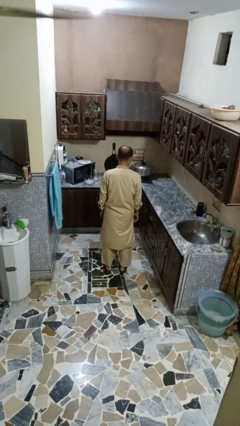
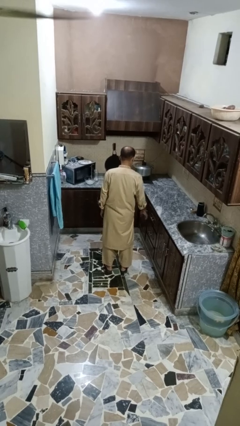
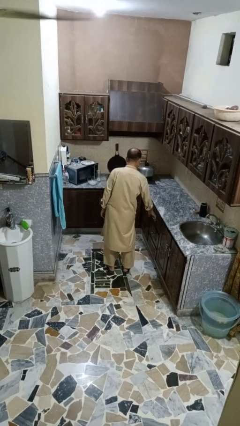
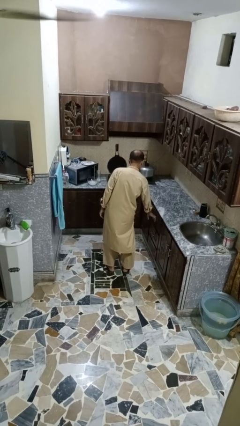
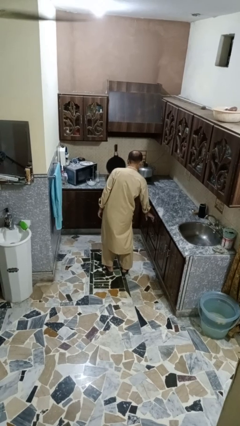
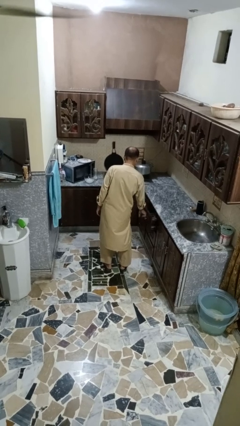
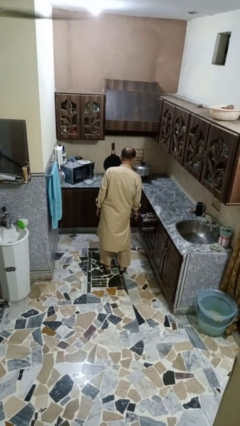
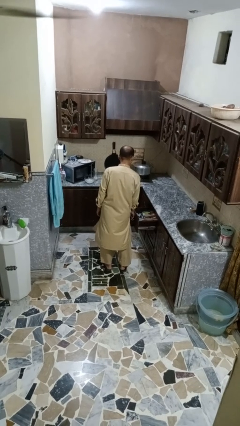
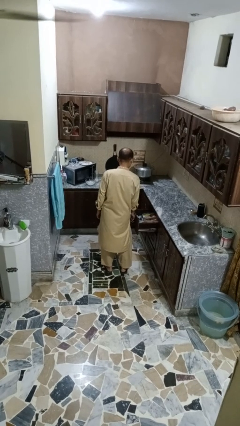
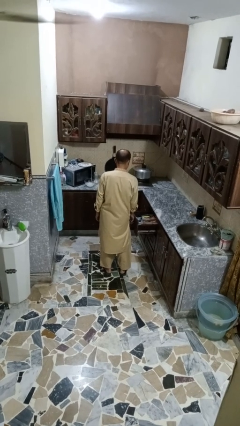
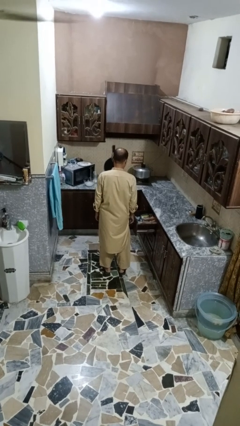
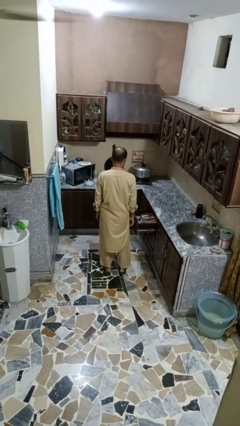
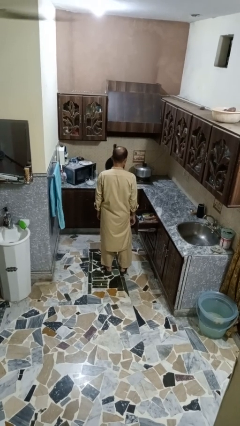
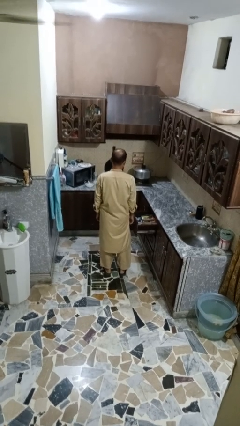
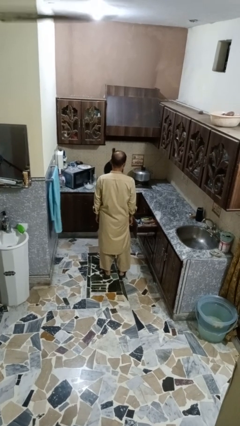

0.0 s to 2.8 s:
person opens kitchen drawer

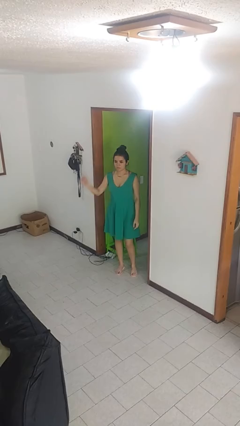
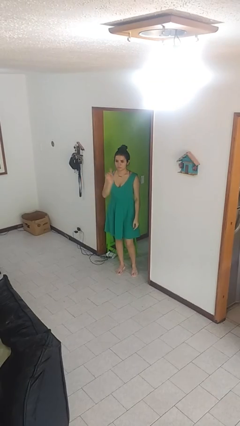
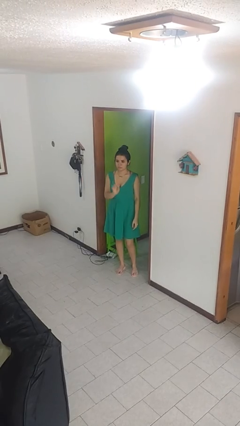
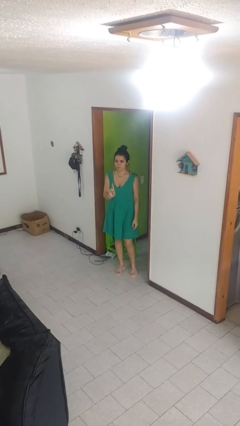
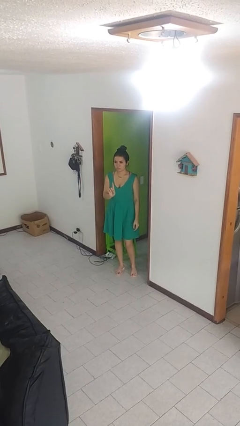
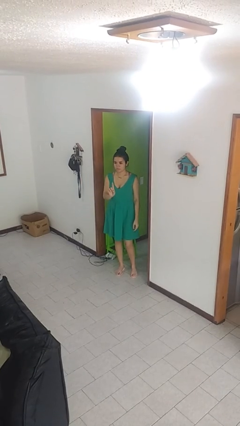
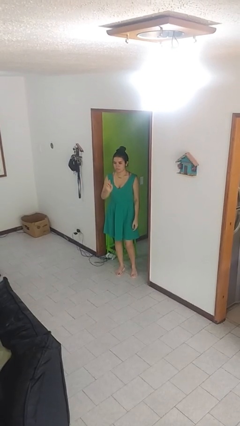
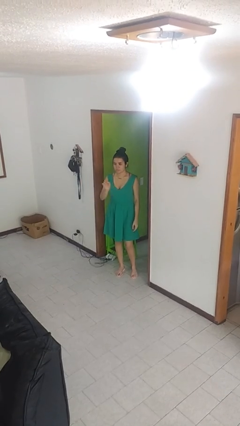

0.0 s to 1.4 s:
person gestures number one

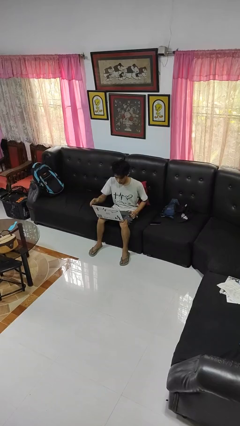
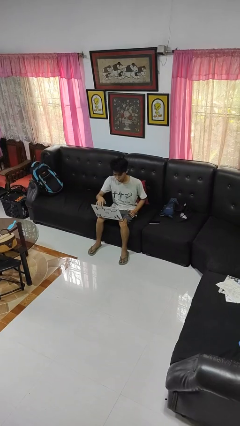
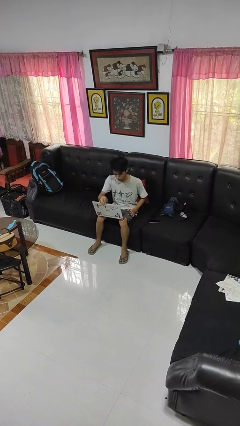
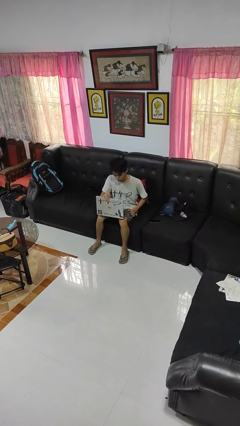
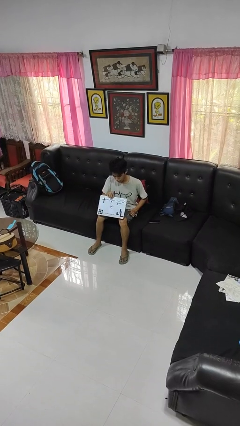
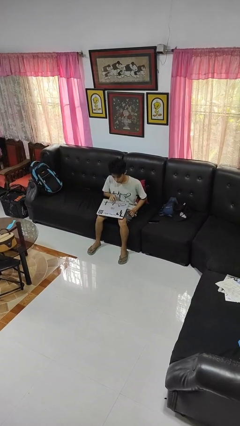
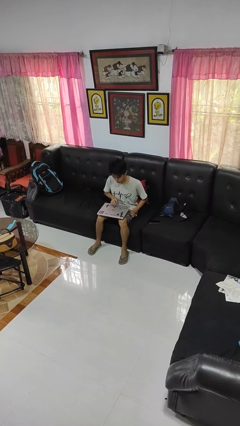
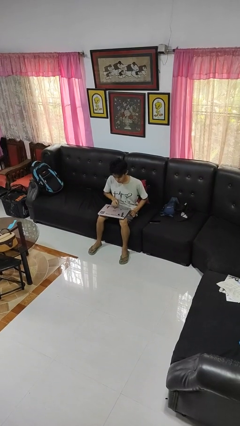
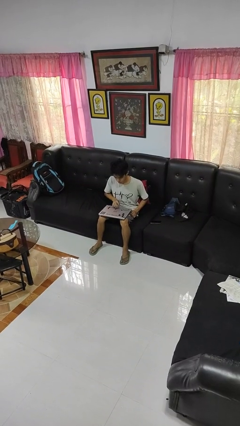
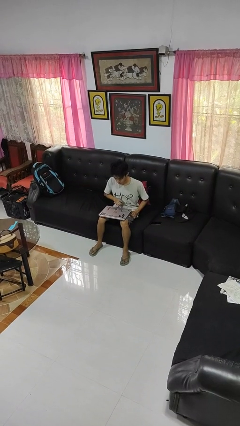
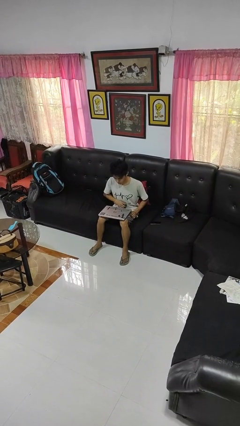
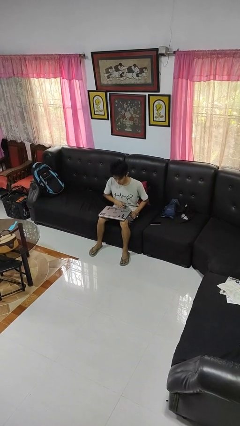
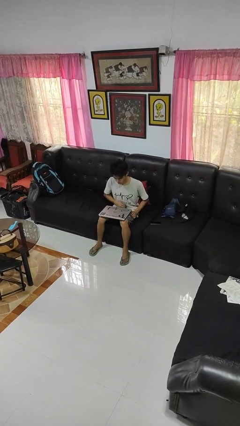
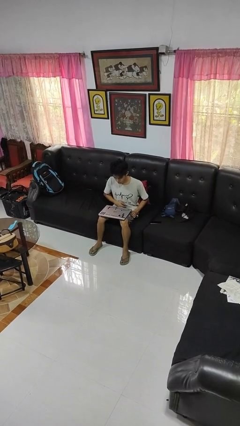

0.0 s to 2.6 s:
person closes laptop

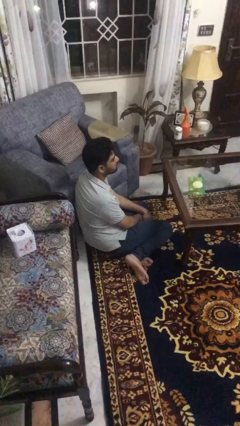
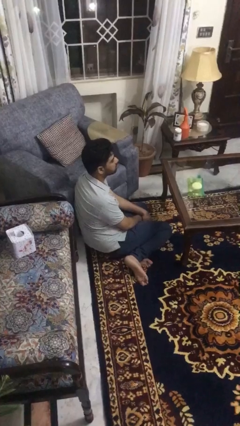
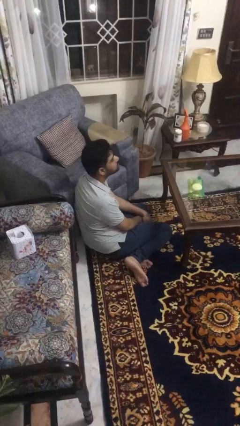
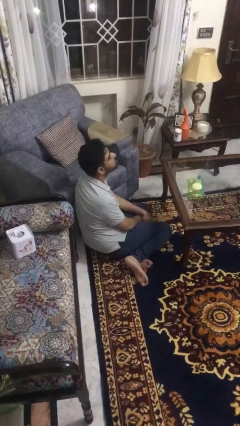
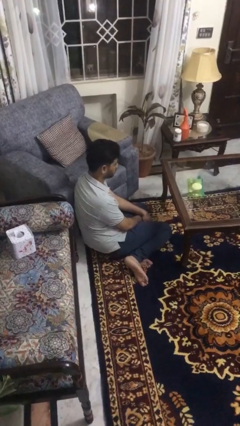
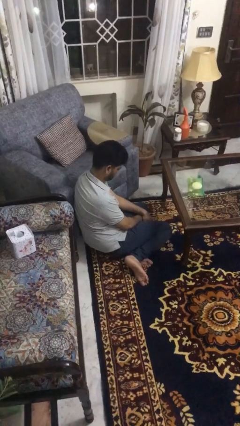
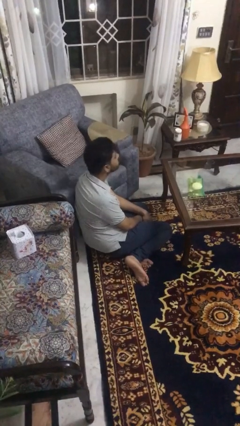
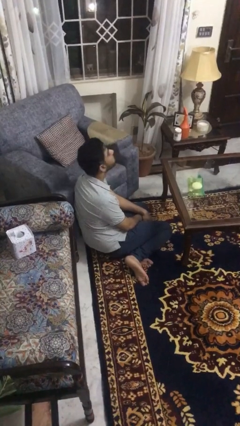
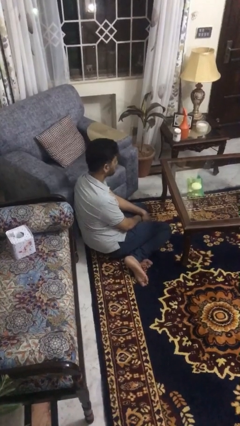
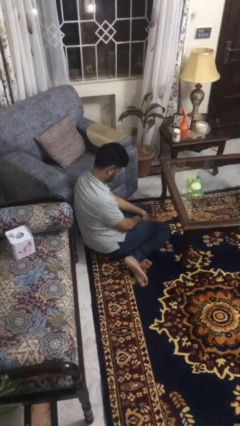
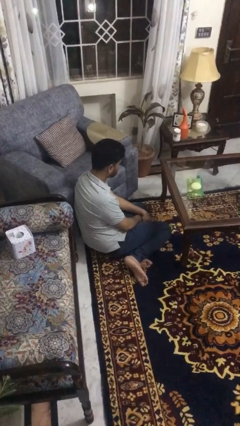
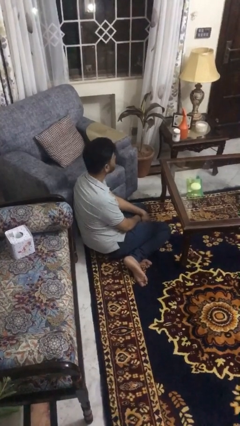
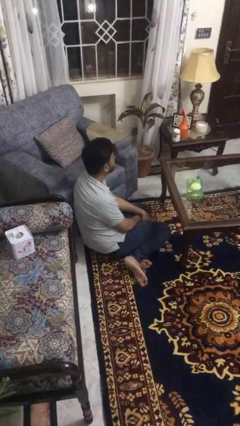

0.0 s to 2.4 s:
person nods head

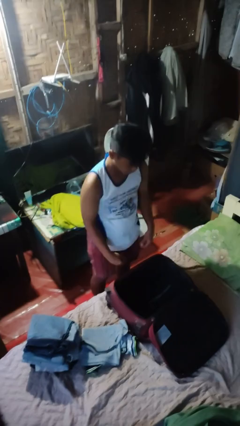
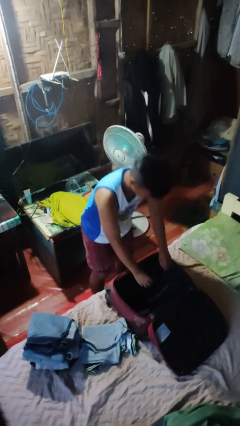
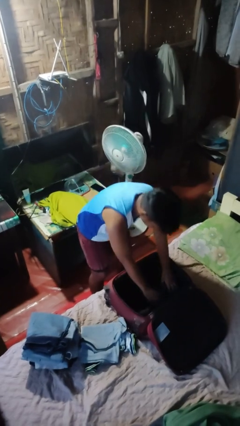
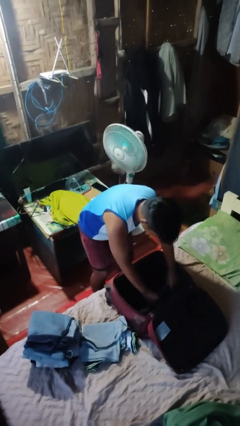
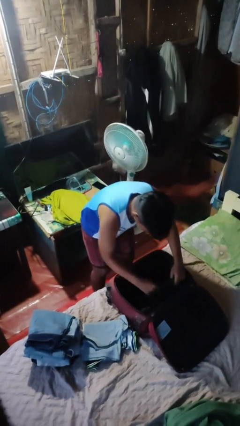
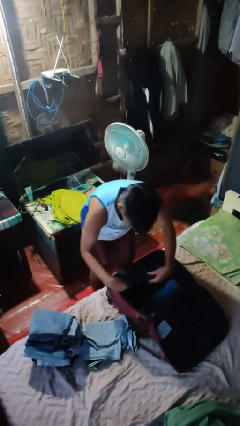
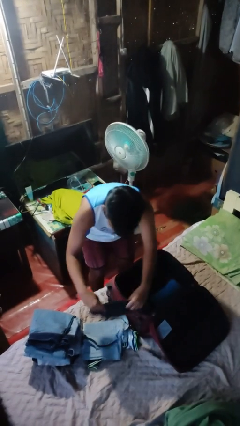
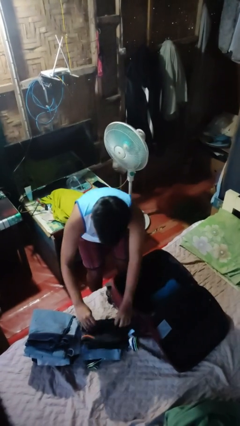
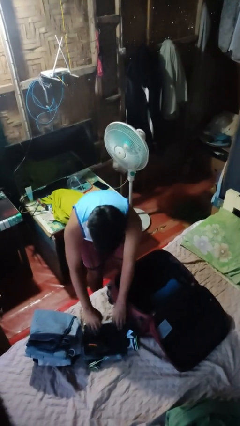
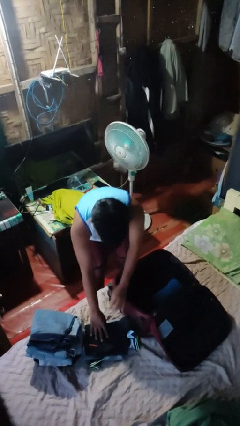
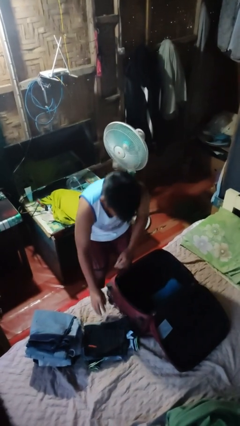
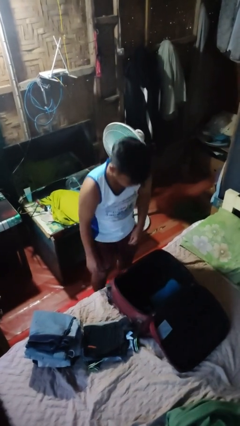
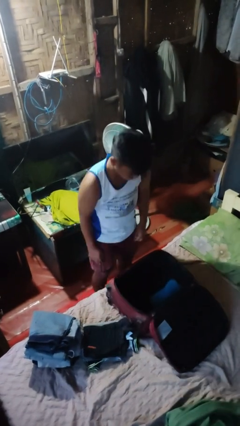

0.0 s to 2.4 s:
person unloads clothes from suitcase

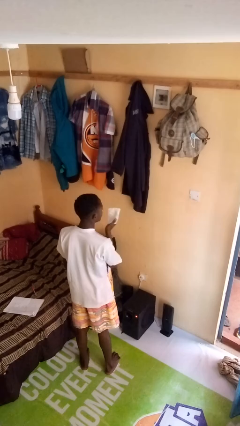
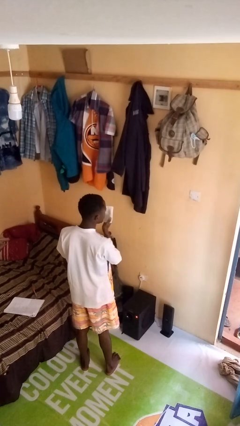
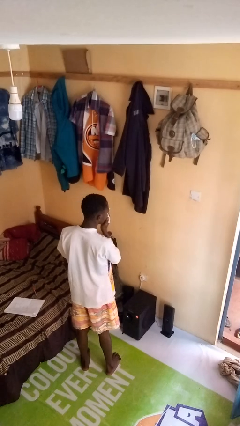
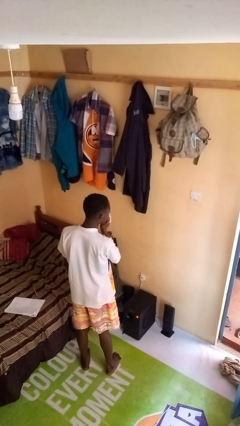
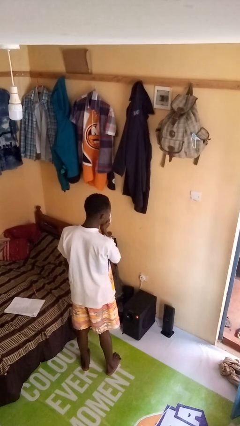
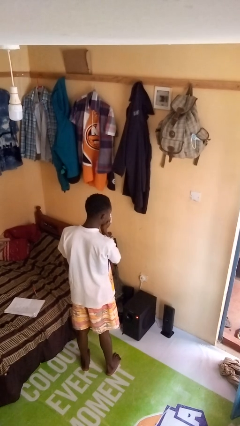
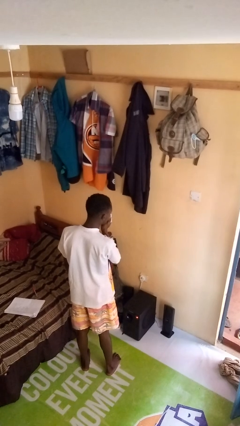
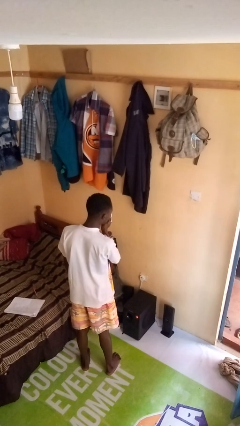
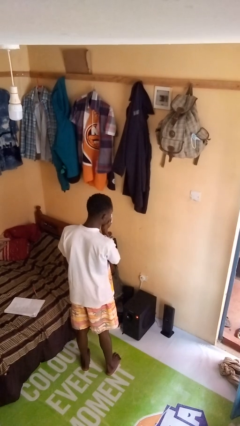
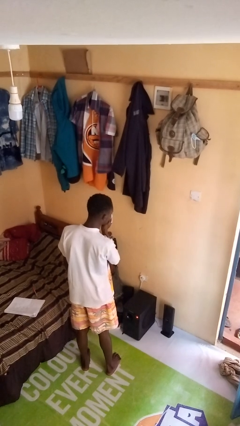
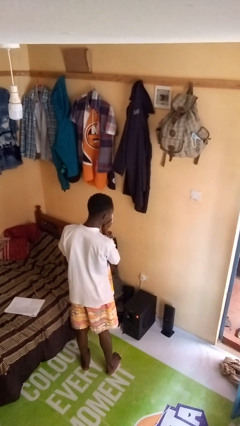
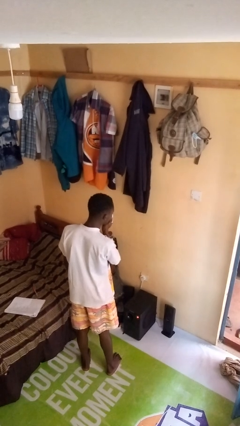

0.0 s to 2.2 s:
person blows nose

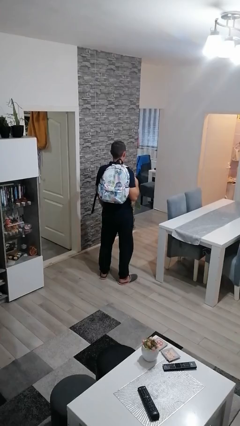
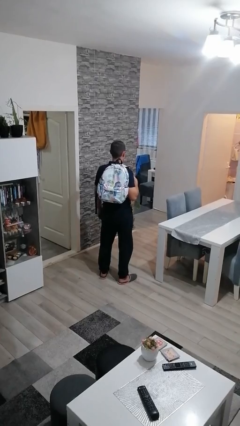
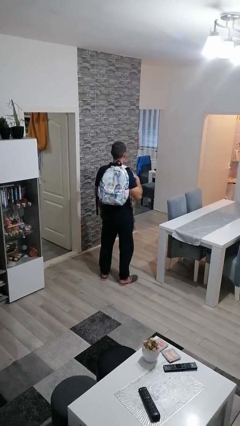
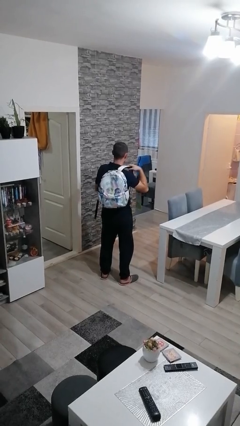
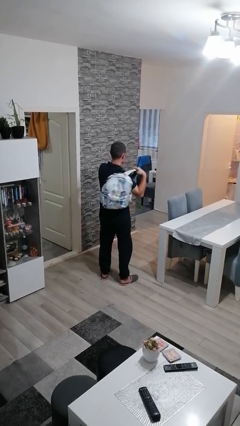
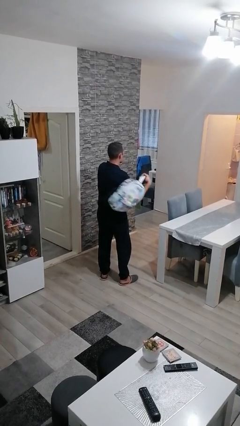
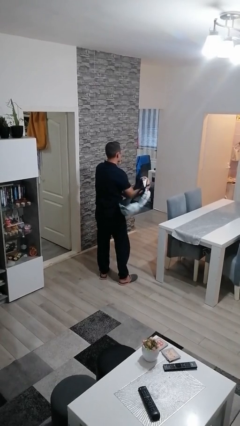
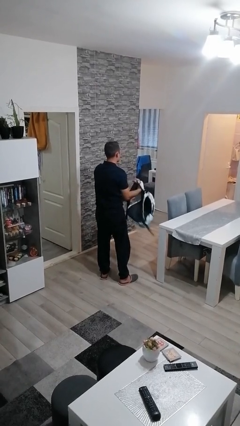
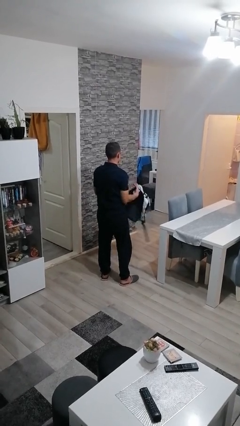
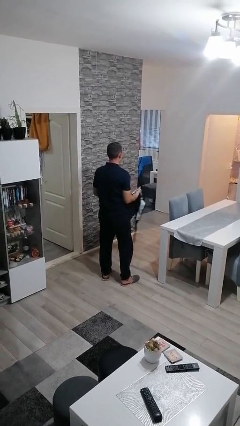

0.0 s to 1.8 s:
person takes off backpack

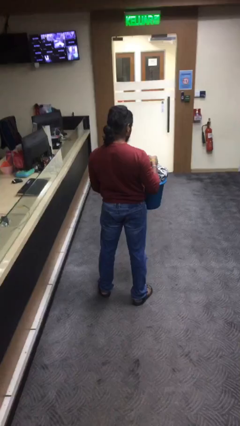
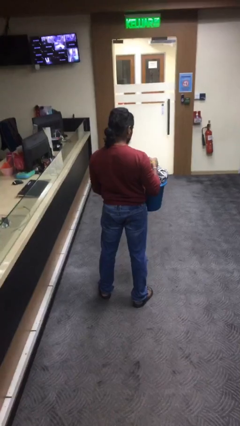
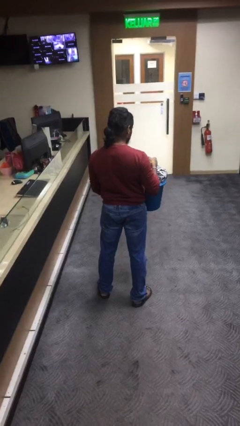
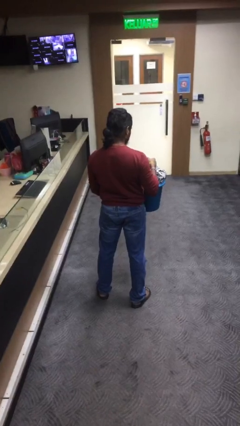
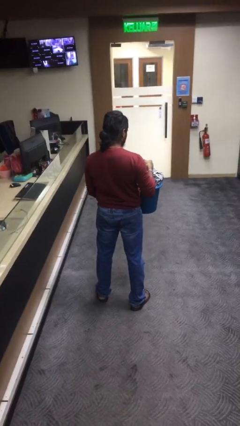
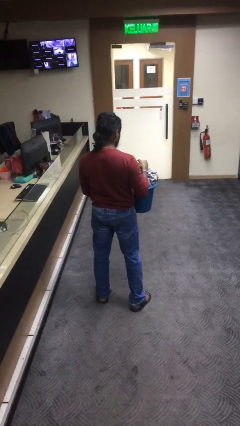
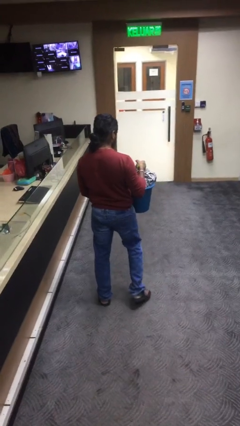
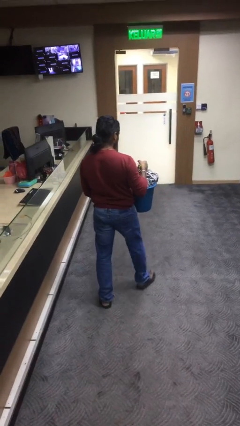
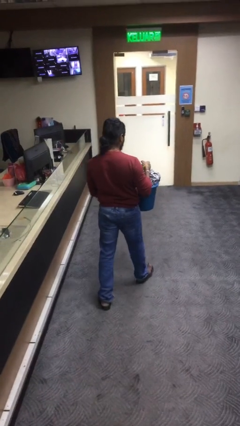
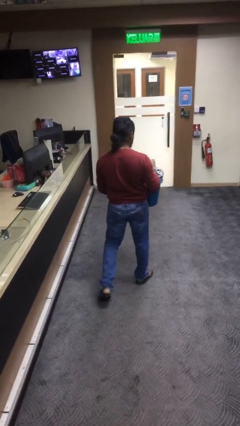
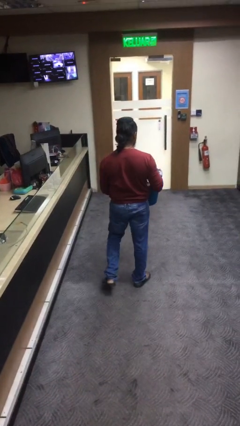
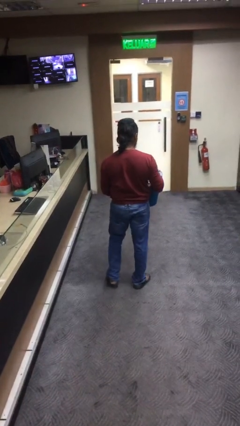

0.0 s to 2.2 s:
person carries laundry basket
